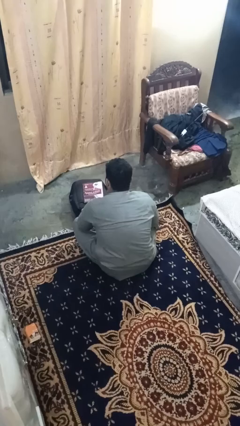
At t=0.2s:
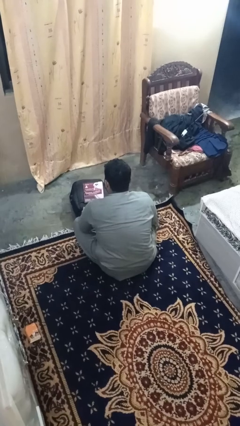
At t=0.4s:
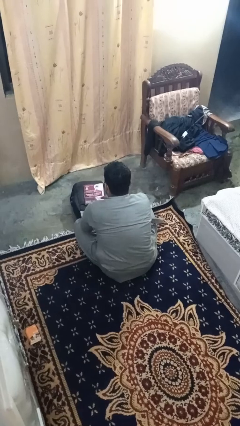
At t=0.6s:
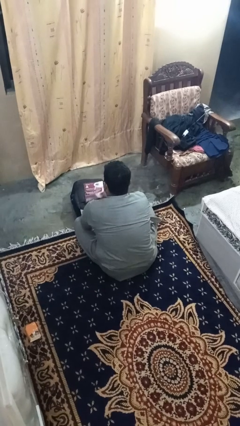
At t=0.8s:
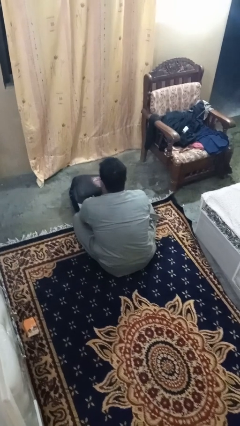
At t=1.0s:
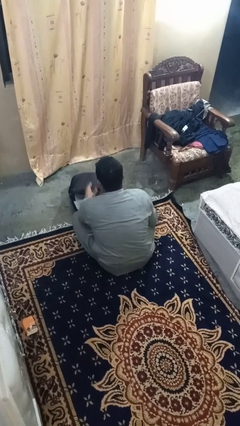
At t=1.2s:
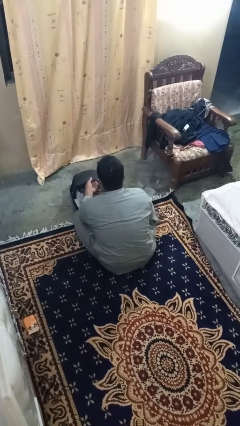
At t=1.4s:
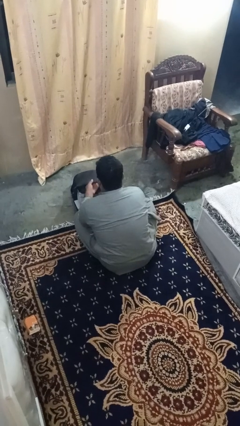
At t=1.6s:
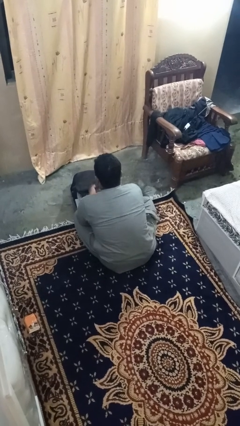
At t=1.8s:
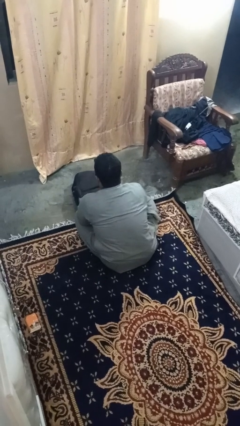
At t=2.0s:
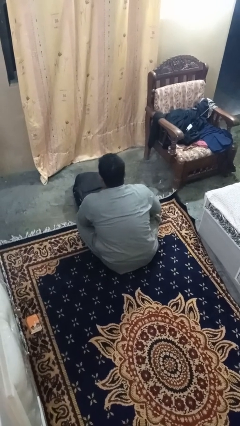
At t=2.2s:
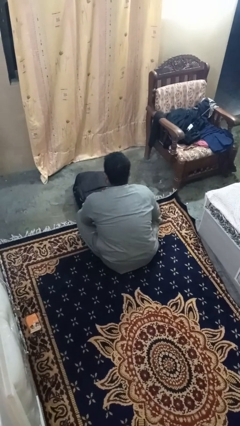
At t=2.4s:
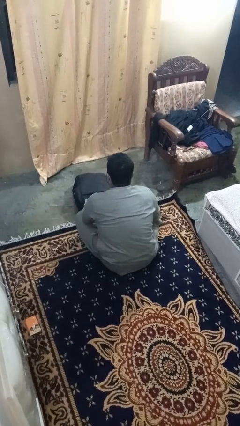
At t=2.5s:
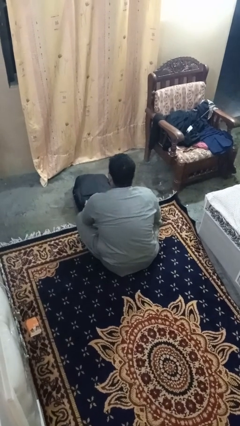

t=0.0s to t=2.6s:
person puts object into bag

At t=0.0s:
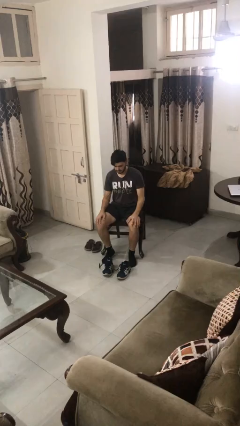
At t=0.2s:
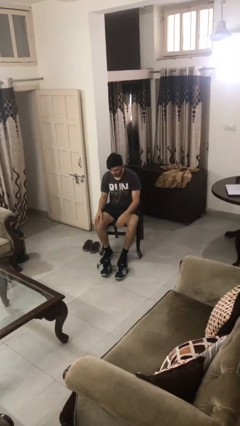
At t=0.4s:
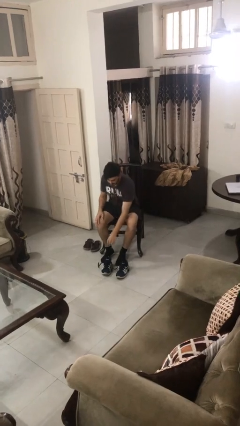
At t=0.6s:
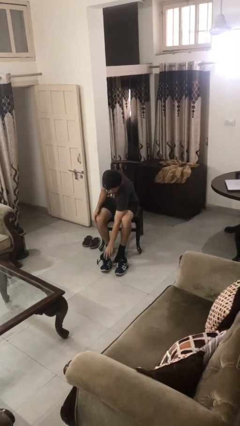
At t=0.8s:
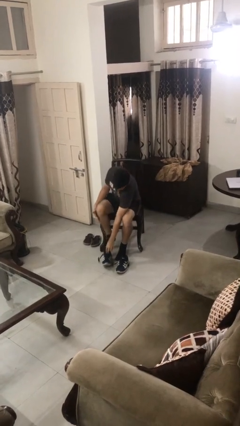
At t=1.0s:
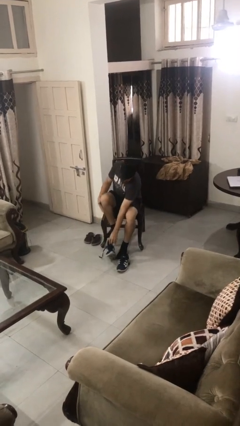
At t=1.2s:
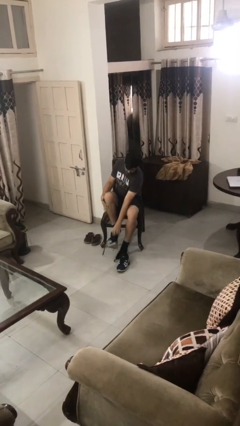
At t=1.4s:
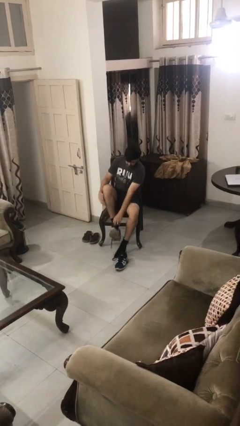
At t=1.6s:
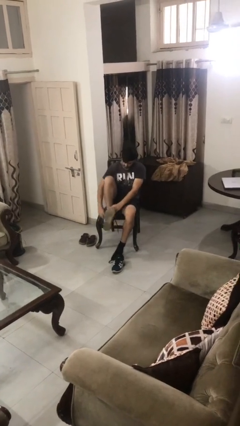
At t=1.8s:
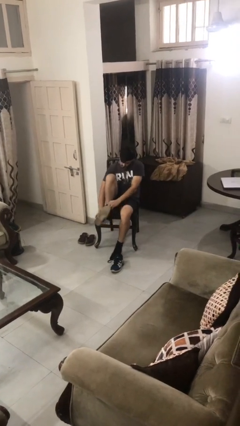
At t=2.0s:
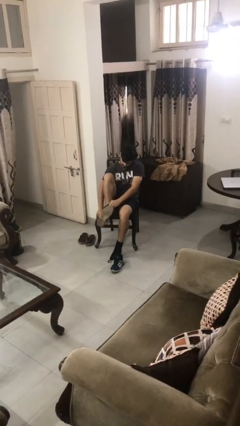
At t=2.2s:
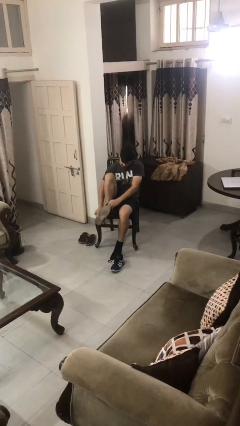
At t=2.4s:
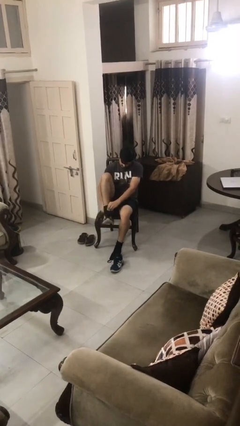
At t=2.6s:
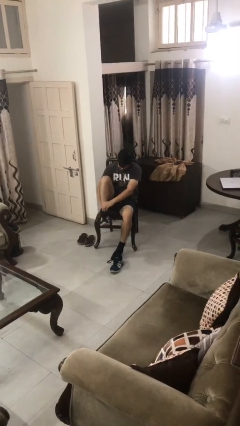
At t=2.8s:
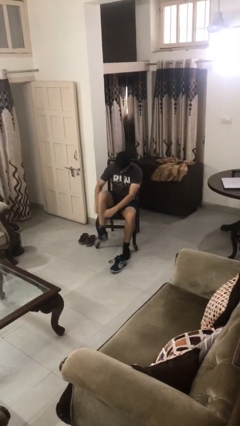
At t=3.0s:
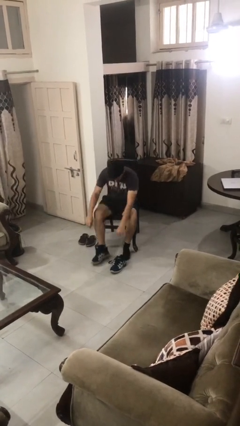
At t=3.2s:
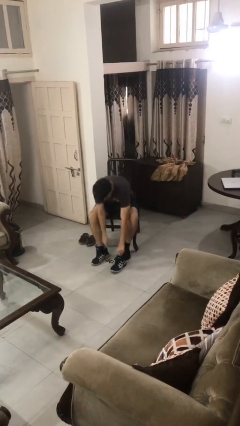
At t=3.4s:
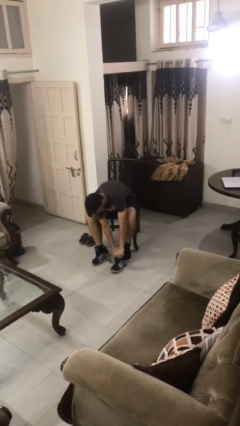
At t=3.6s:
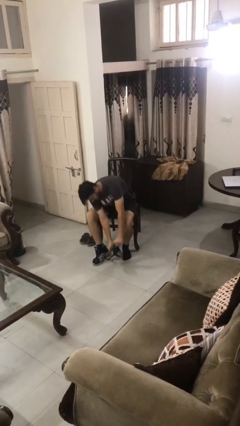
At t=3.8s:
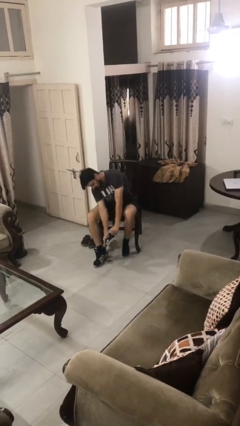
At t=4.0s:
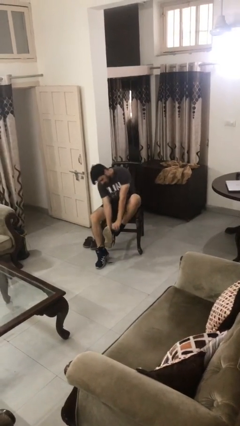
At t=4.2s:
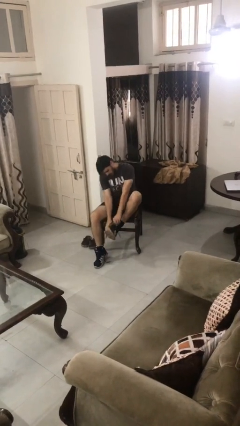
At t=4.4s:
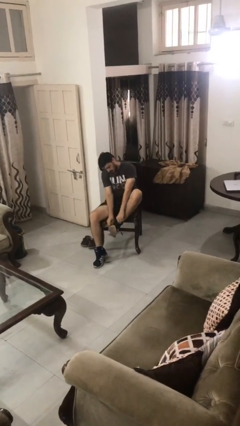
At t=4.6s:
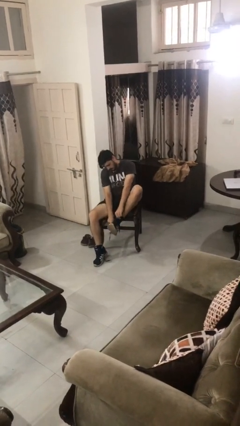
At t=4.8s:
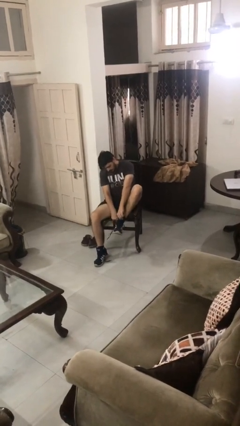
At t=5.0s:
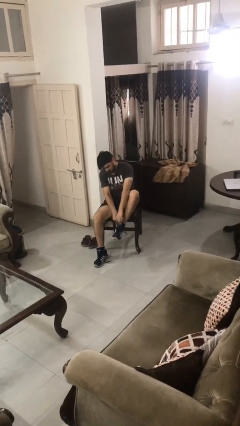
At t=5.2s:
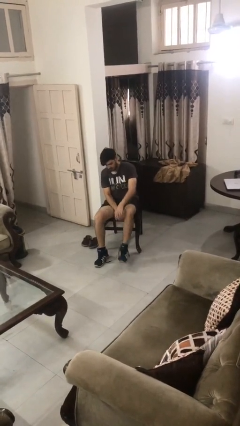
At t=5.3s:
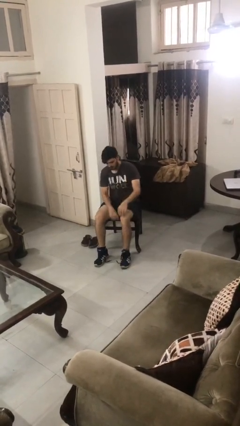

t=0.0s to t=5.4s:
person puts on shoes

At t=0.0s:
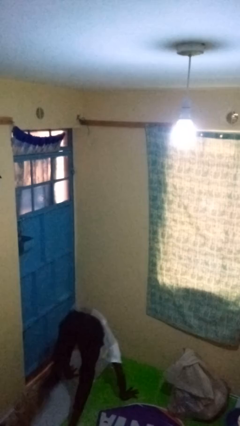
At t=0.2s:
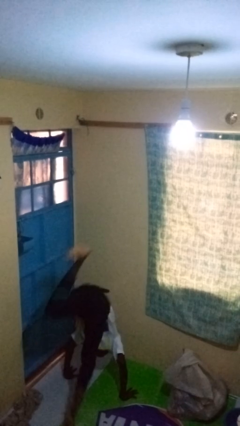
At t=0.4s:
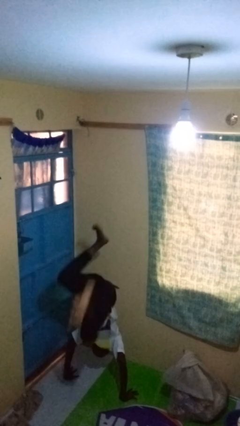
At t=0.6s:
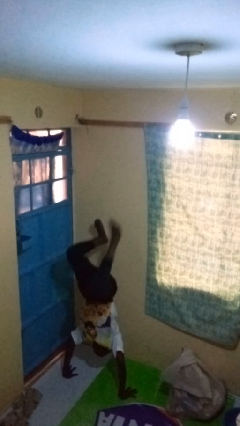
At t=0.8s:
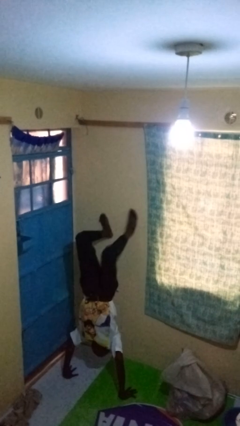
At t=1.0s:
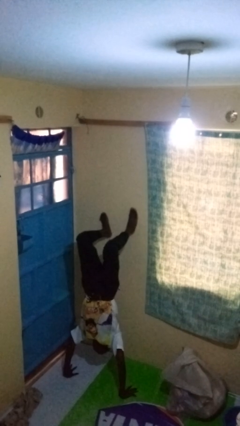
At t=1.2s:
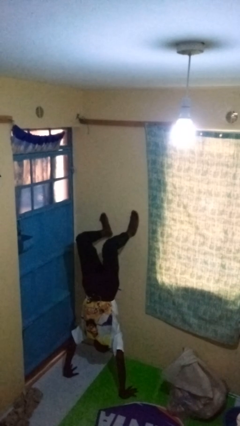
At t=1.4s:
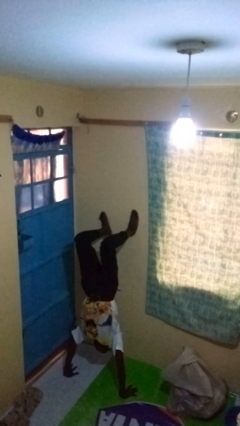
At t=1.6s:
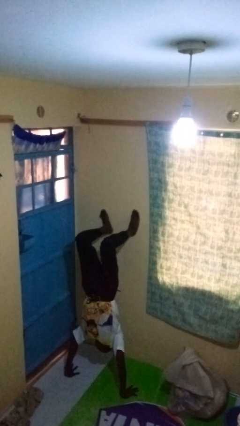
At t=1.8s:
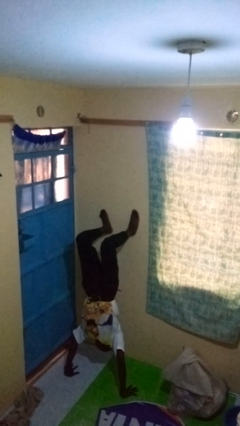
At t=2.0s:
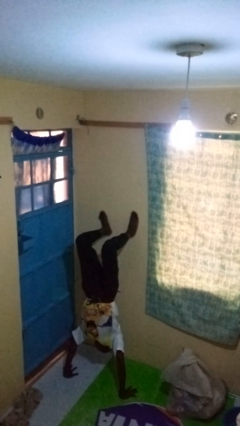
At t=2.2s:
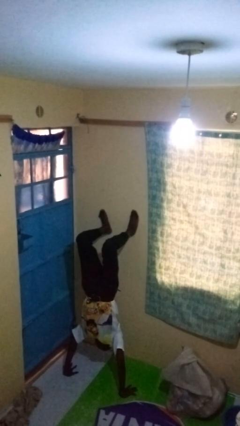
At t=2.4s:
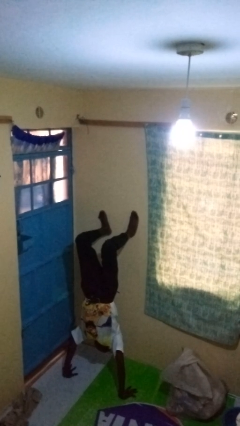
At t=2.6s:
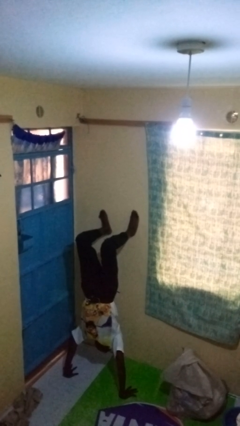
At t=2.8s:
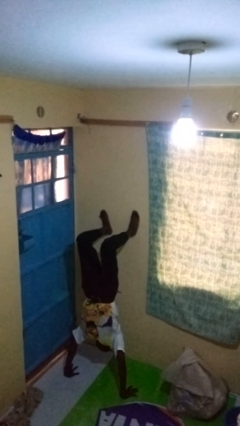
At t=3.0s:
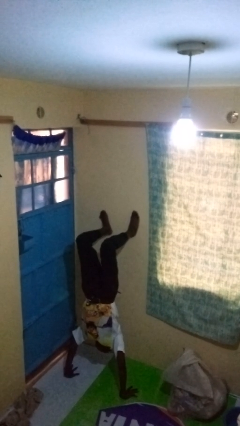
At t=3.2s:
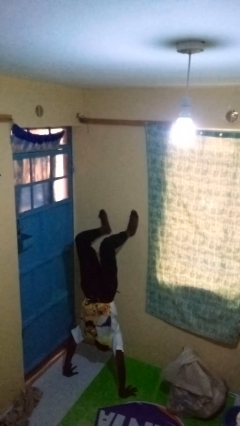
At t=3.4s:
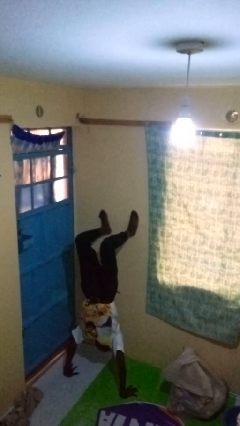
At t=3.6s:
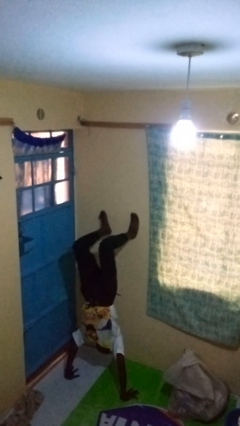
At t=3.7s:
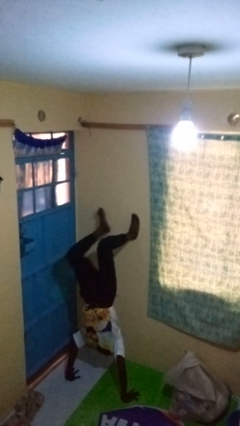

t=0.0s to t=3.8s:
person handstand

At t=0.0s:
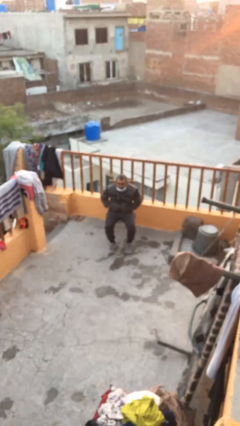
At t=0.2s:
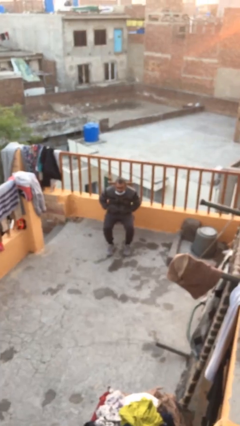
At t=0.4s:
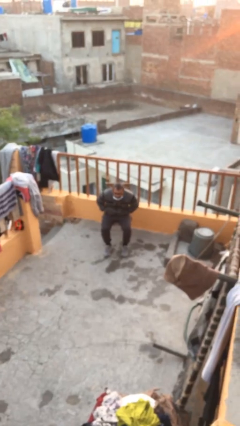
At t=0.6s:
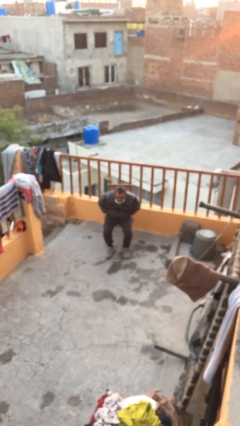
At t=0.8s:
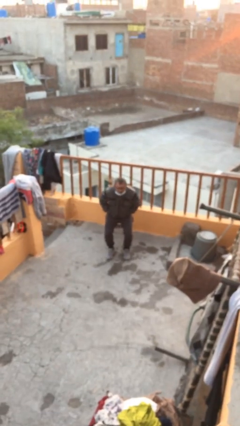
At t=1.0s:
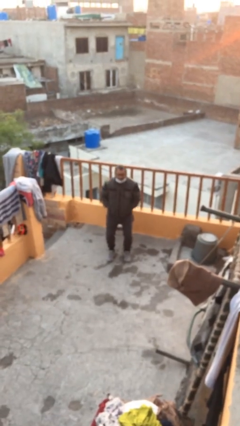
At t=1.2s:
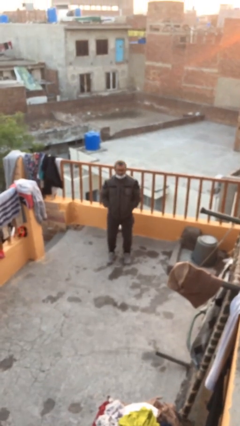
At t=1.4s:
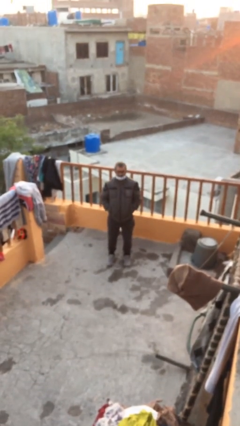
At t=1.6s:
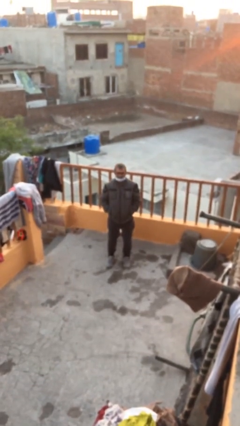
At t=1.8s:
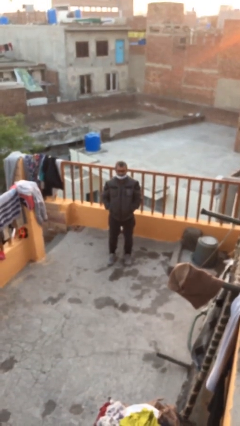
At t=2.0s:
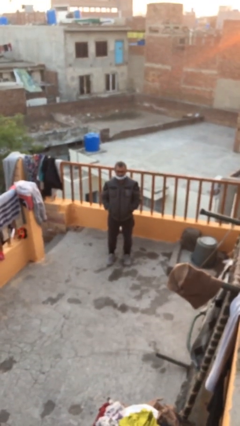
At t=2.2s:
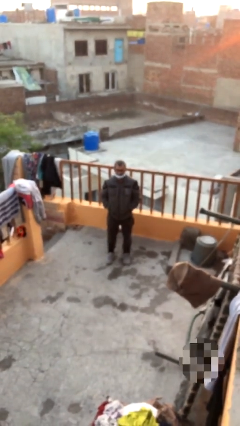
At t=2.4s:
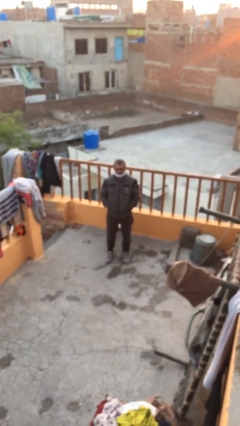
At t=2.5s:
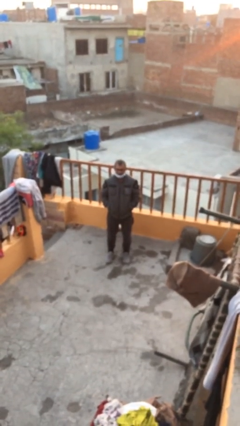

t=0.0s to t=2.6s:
person stands up

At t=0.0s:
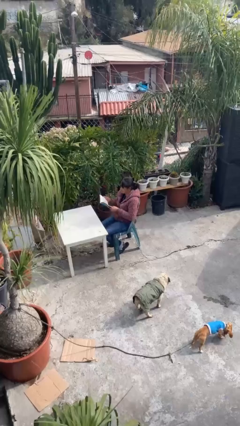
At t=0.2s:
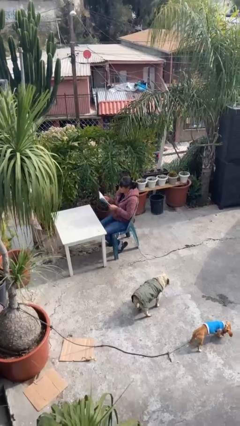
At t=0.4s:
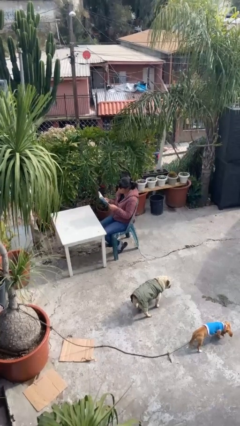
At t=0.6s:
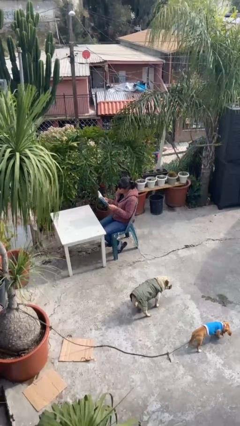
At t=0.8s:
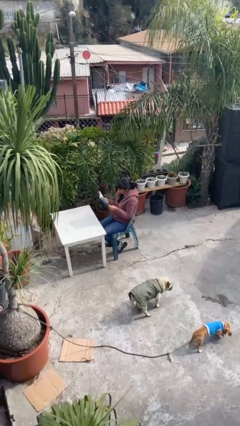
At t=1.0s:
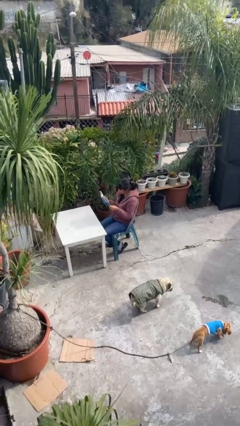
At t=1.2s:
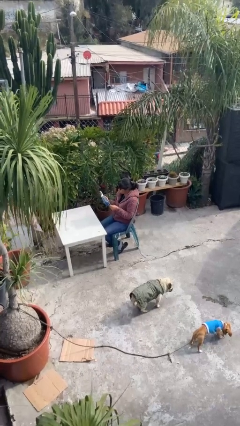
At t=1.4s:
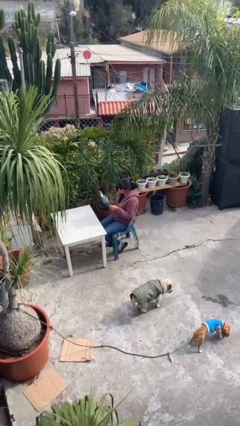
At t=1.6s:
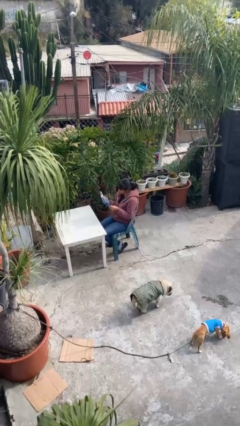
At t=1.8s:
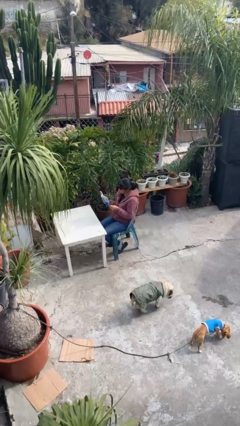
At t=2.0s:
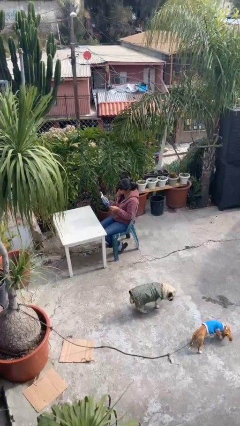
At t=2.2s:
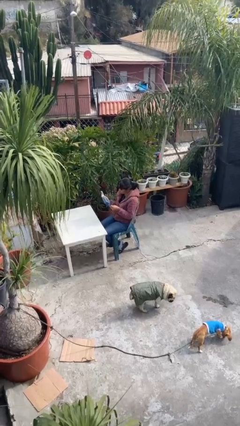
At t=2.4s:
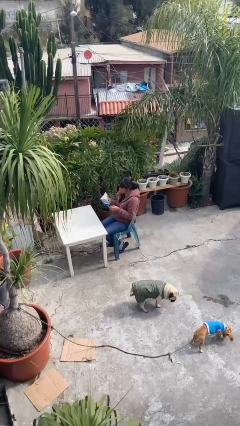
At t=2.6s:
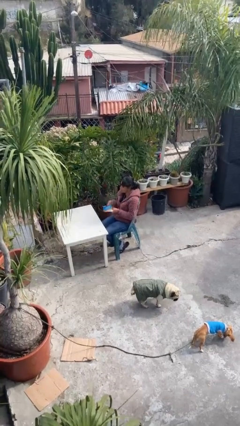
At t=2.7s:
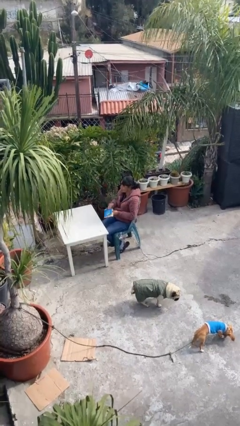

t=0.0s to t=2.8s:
person reads document
